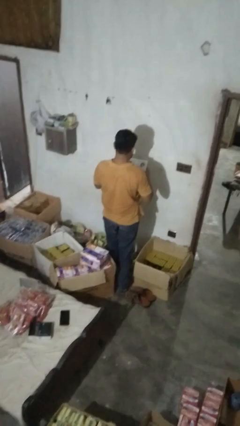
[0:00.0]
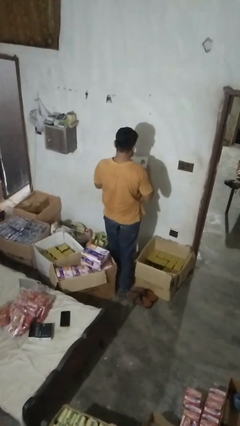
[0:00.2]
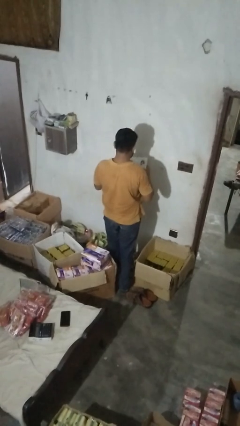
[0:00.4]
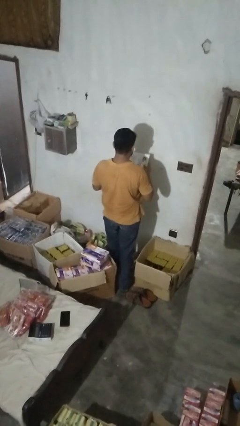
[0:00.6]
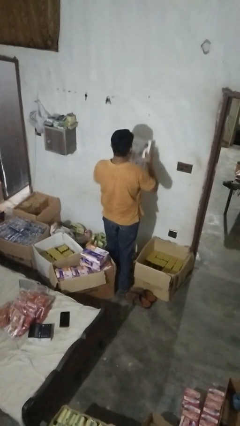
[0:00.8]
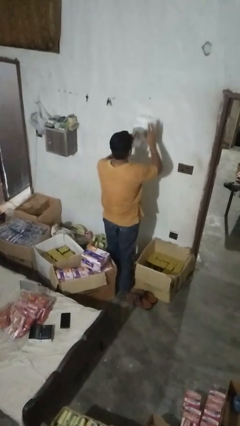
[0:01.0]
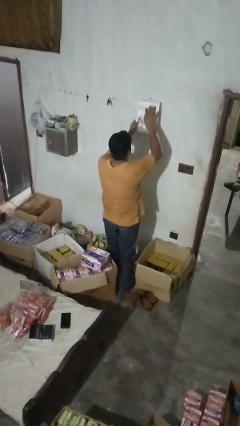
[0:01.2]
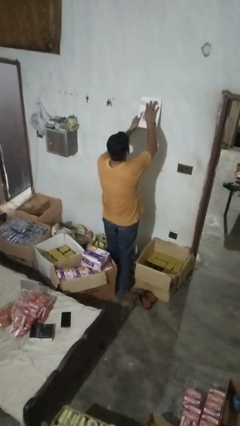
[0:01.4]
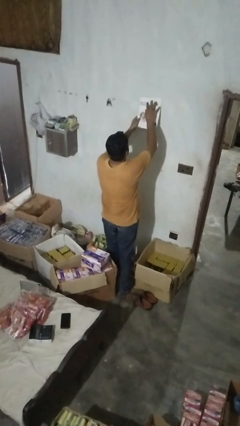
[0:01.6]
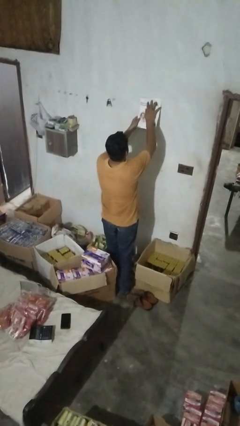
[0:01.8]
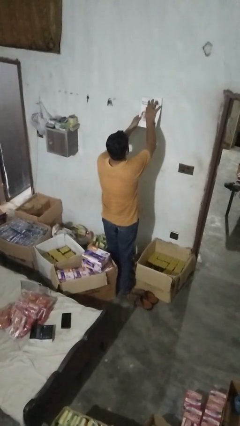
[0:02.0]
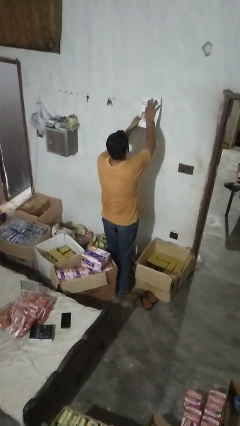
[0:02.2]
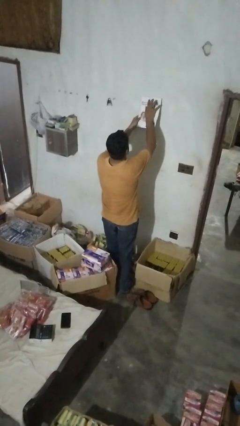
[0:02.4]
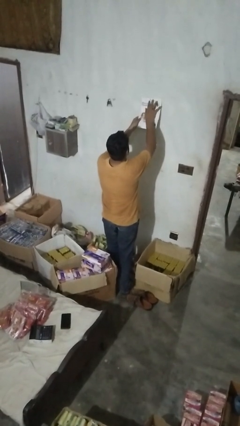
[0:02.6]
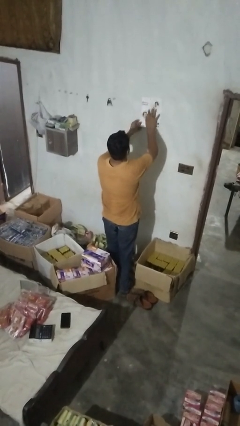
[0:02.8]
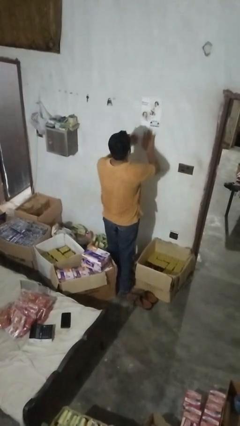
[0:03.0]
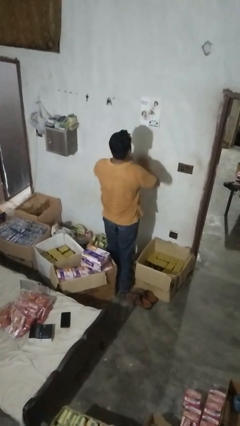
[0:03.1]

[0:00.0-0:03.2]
person puts up picture frame

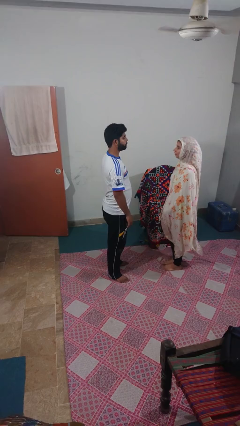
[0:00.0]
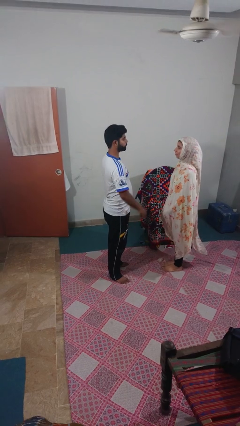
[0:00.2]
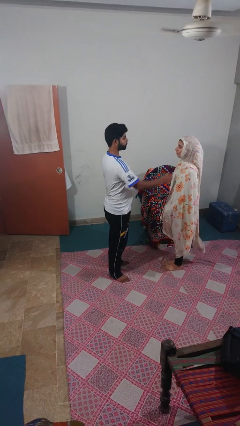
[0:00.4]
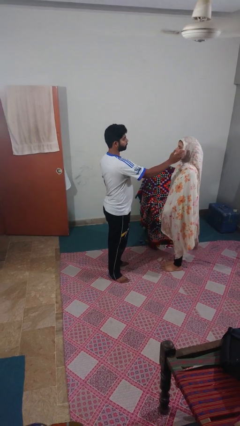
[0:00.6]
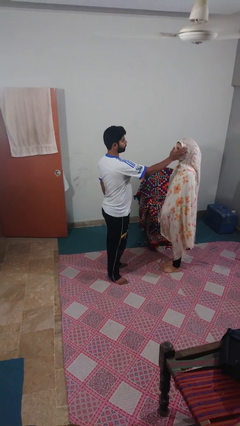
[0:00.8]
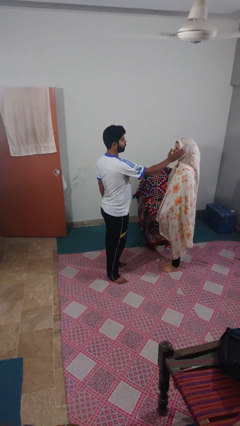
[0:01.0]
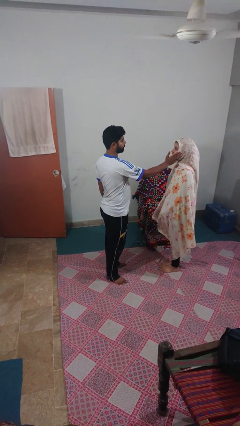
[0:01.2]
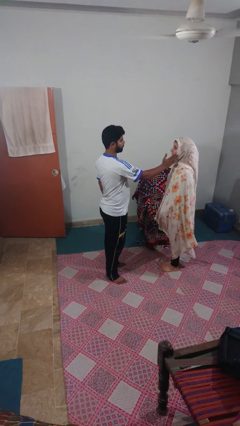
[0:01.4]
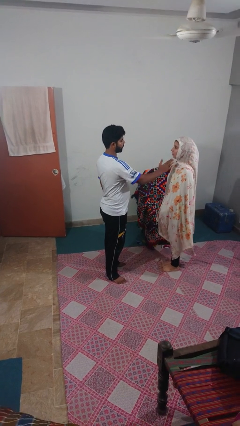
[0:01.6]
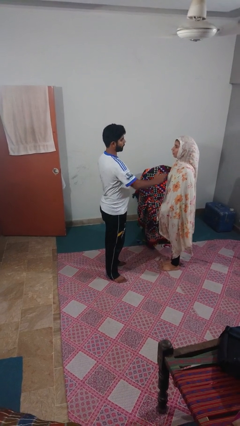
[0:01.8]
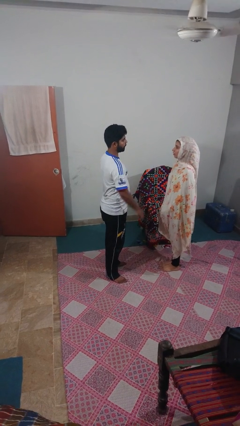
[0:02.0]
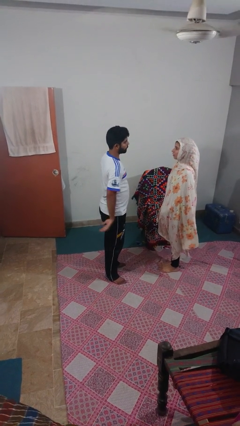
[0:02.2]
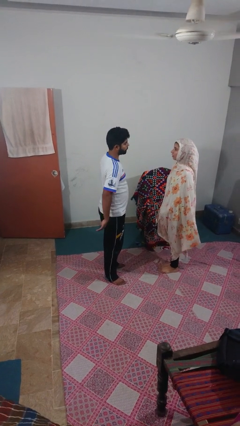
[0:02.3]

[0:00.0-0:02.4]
person touches face of person

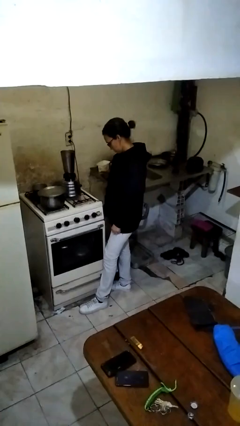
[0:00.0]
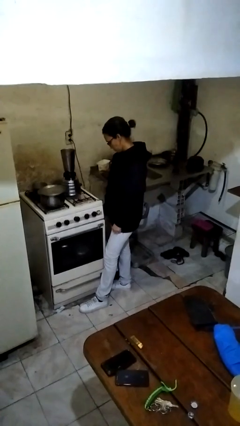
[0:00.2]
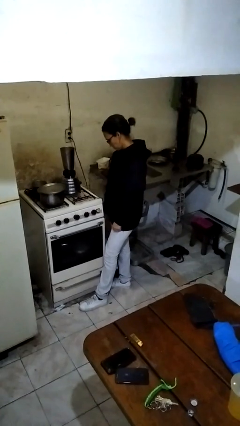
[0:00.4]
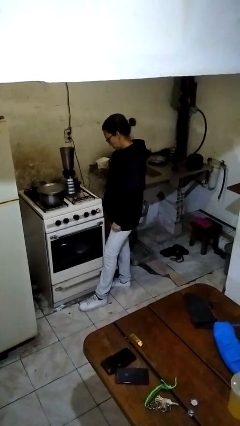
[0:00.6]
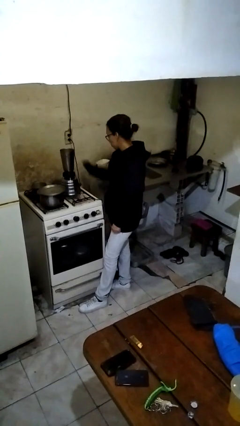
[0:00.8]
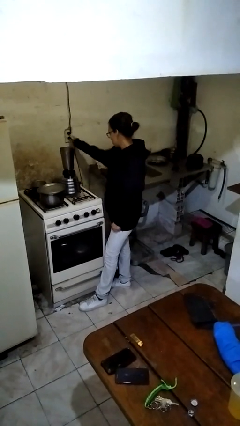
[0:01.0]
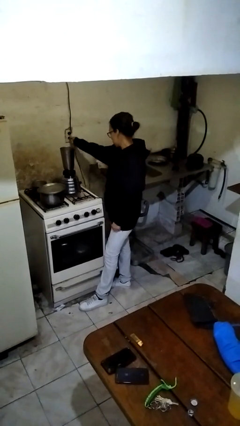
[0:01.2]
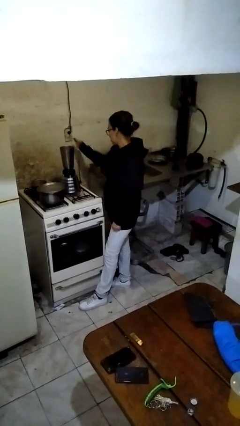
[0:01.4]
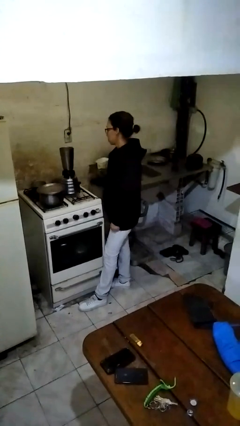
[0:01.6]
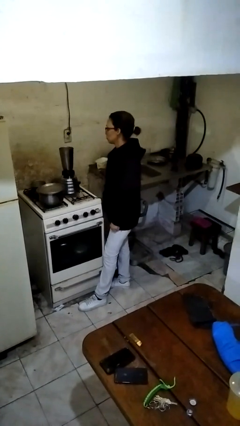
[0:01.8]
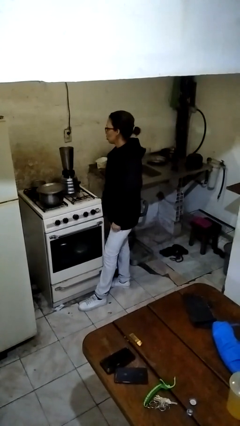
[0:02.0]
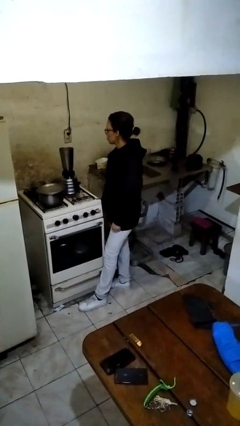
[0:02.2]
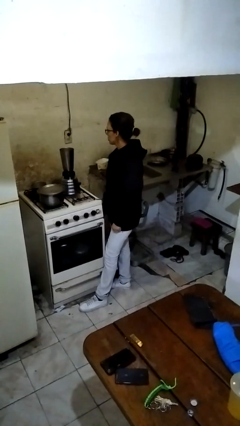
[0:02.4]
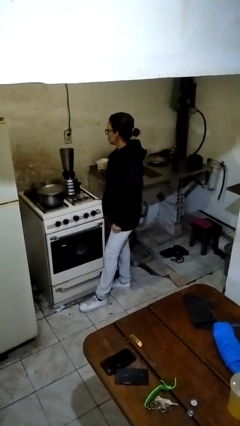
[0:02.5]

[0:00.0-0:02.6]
person unplugs from electrical socket

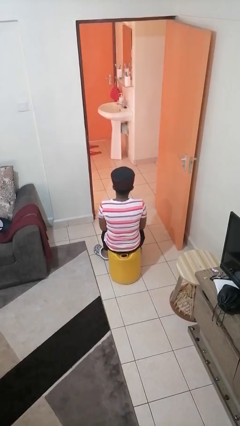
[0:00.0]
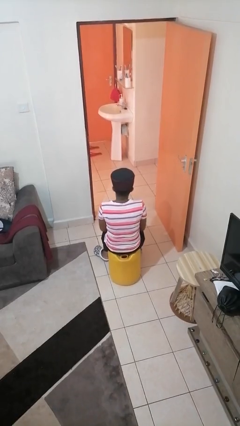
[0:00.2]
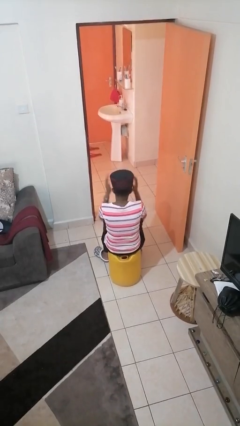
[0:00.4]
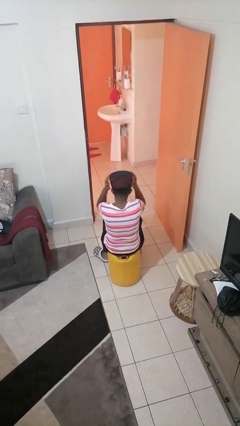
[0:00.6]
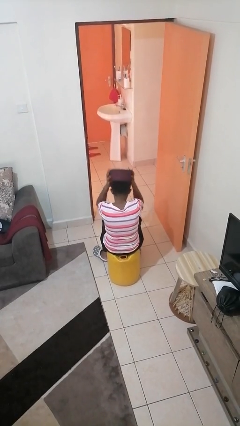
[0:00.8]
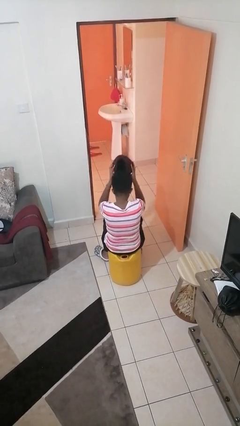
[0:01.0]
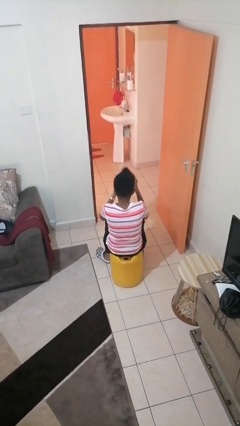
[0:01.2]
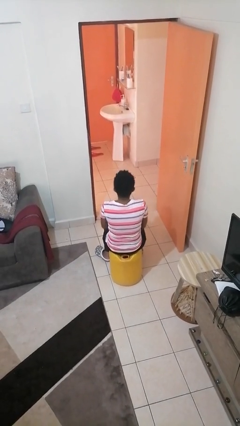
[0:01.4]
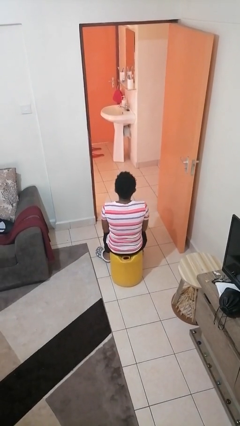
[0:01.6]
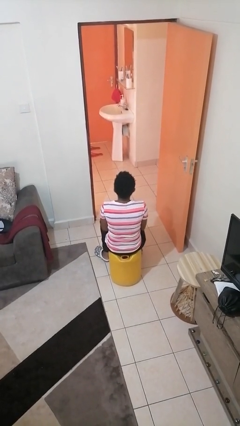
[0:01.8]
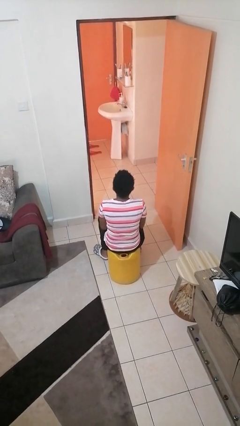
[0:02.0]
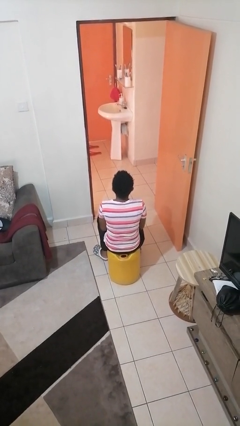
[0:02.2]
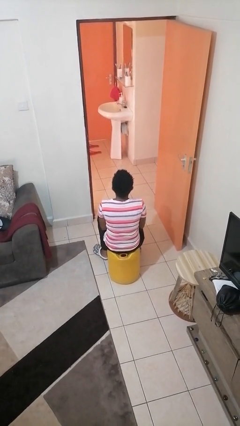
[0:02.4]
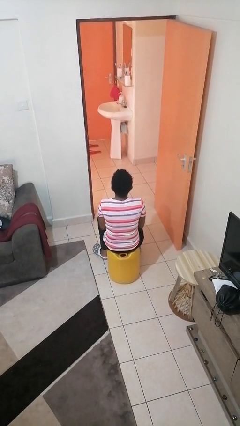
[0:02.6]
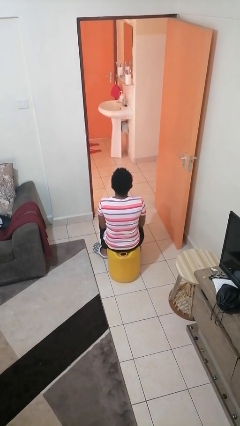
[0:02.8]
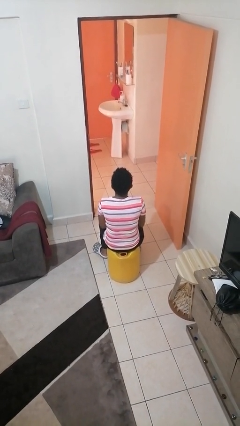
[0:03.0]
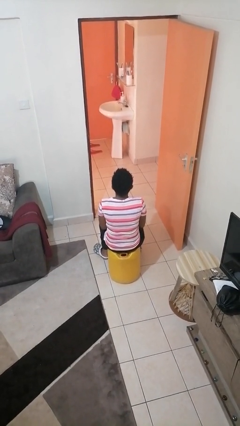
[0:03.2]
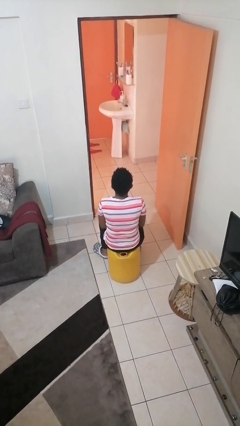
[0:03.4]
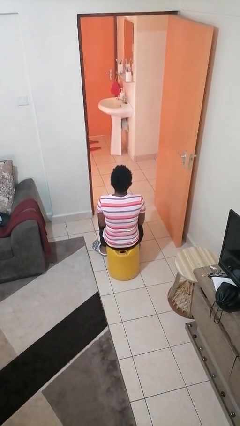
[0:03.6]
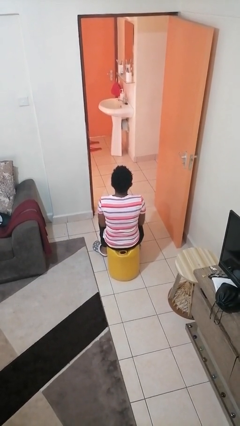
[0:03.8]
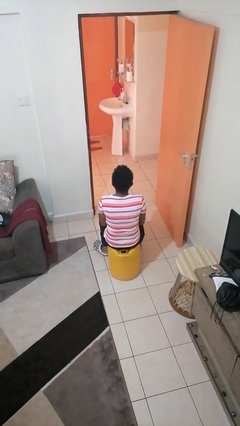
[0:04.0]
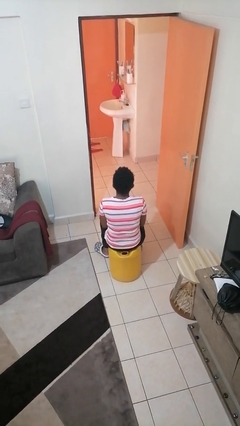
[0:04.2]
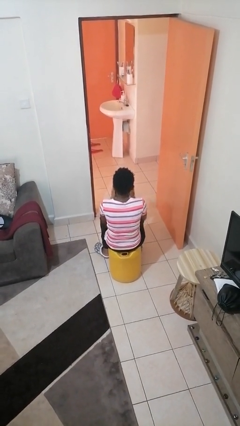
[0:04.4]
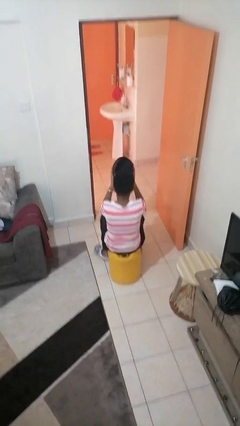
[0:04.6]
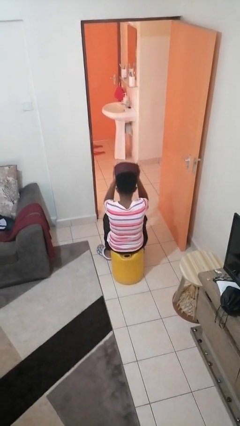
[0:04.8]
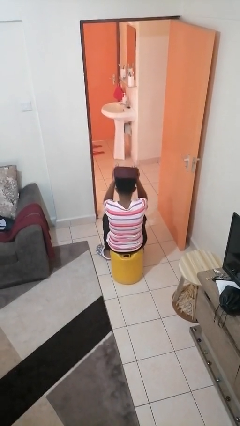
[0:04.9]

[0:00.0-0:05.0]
person takes off hat

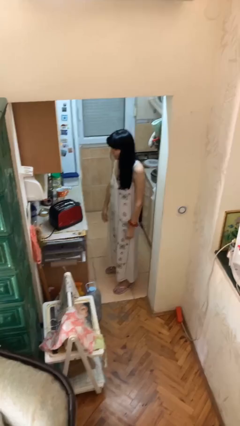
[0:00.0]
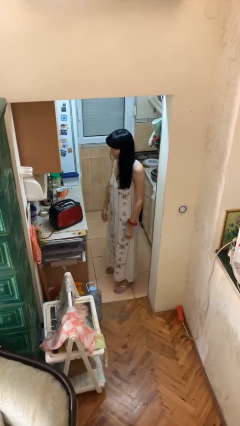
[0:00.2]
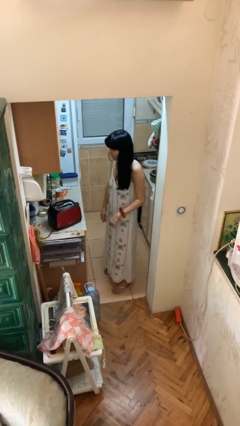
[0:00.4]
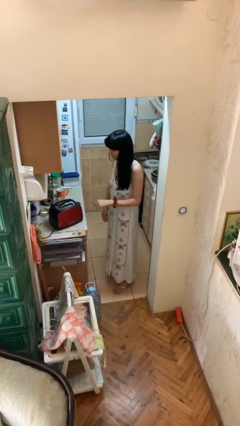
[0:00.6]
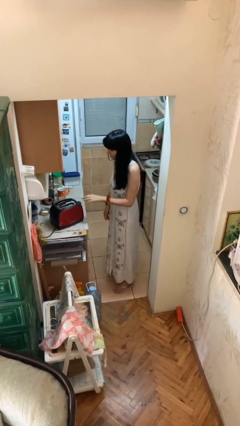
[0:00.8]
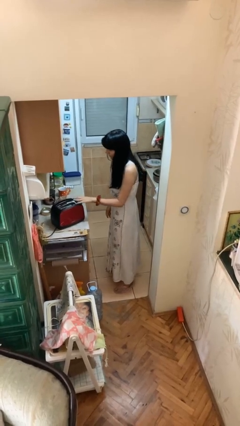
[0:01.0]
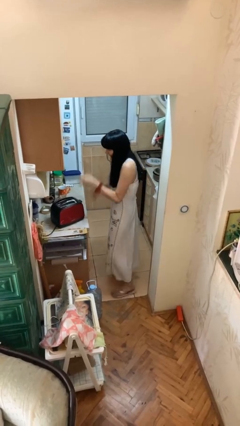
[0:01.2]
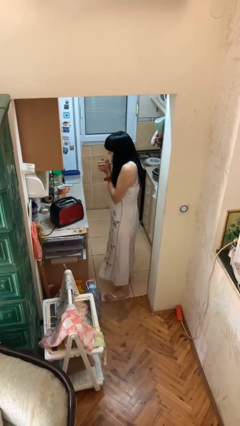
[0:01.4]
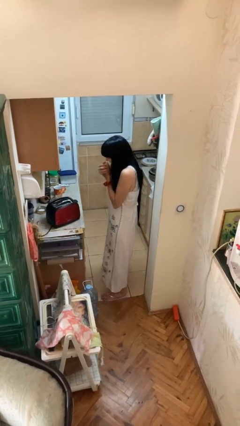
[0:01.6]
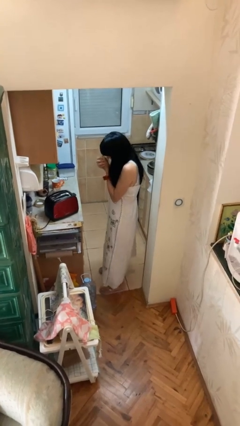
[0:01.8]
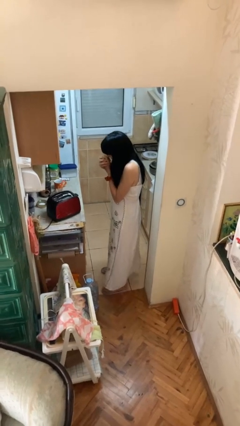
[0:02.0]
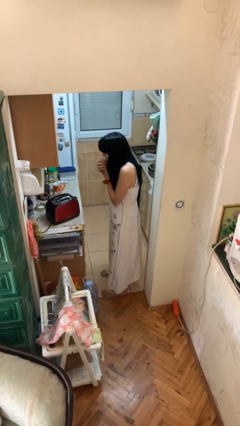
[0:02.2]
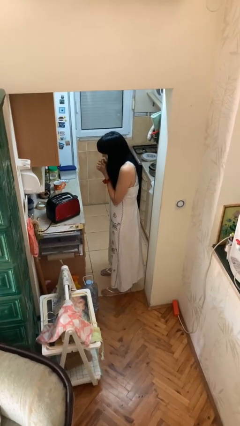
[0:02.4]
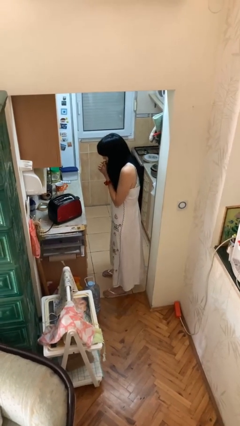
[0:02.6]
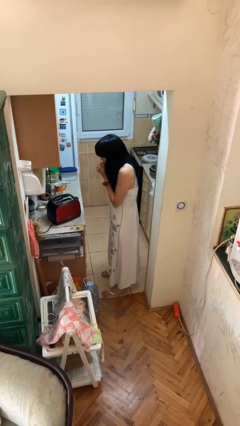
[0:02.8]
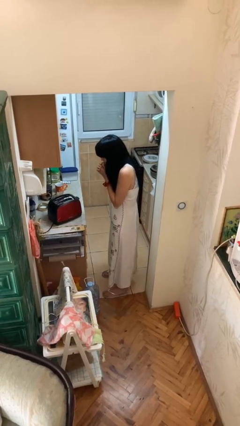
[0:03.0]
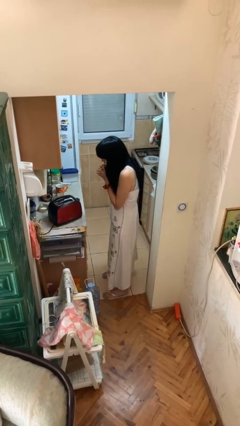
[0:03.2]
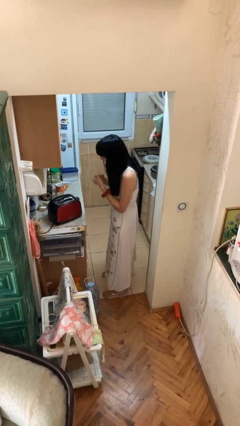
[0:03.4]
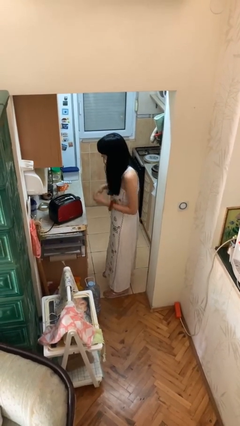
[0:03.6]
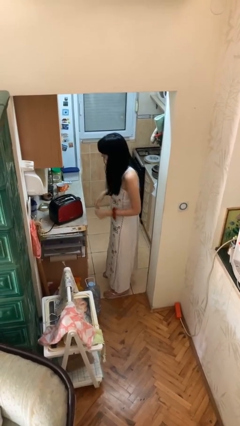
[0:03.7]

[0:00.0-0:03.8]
person burns hand

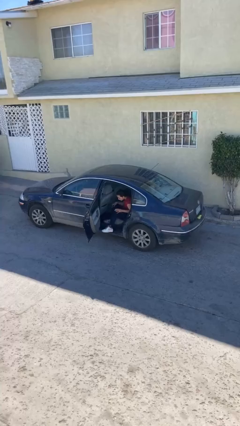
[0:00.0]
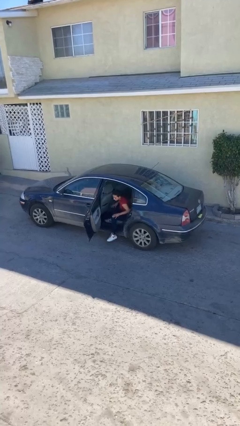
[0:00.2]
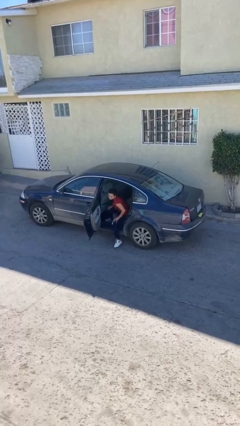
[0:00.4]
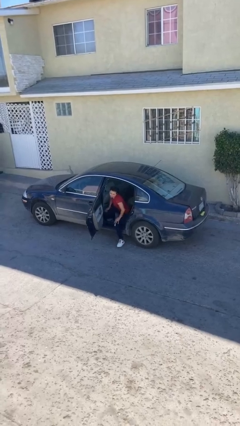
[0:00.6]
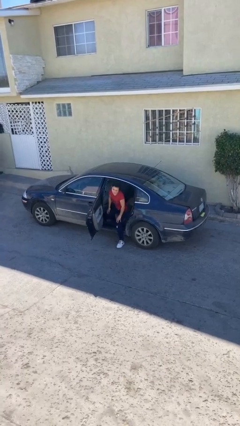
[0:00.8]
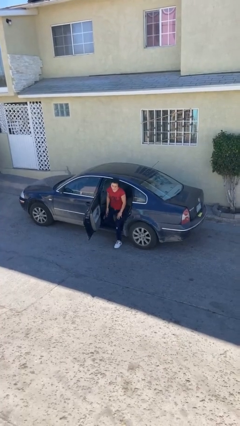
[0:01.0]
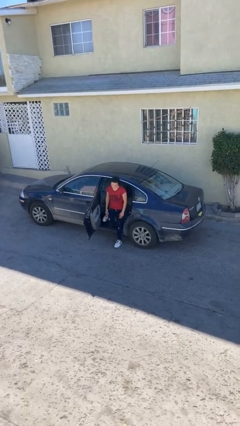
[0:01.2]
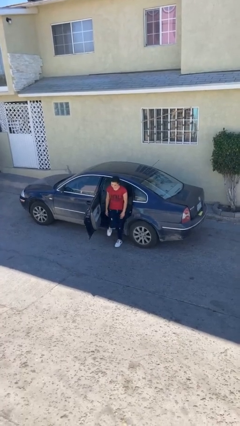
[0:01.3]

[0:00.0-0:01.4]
person exits car
